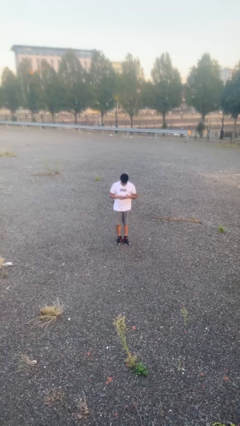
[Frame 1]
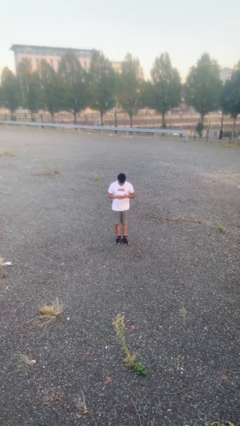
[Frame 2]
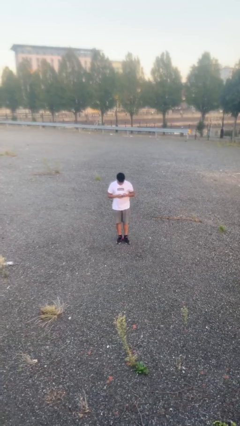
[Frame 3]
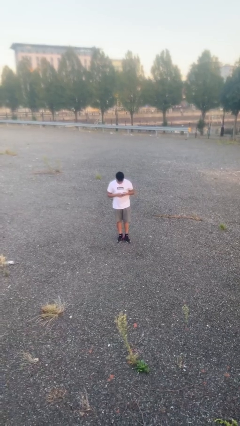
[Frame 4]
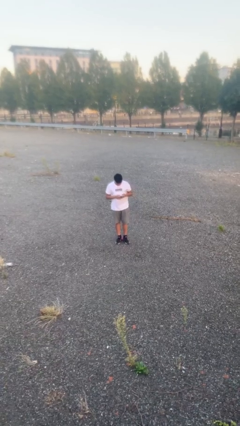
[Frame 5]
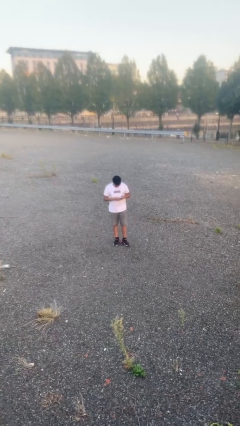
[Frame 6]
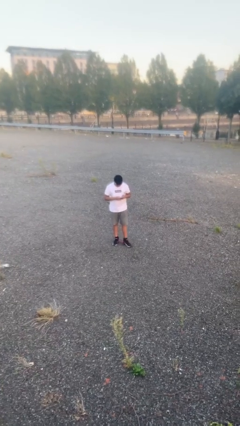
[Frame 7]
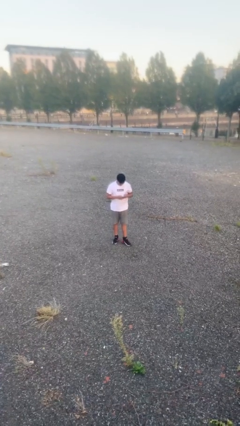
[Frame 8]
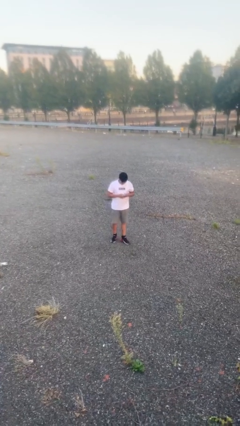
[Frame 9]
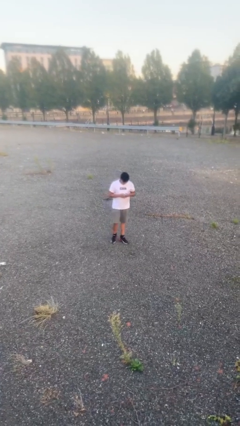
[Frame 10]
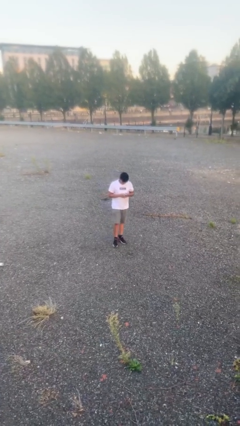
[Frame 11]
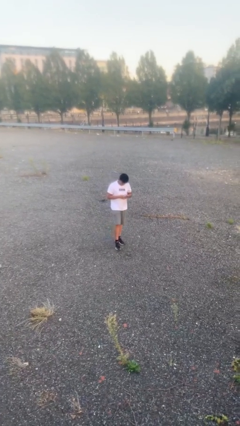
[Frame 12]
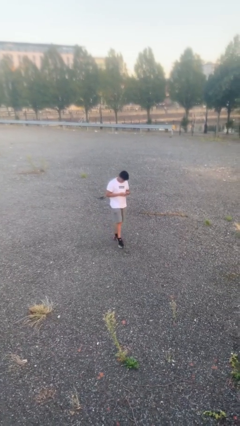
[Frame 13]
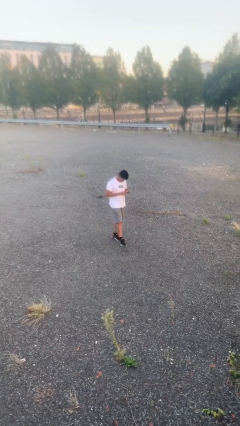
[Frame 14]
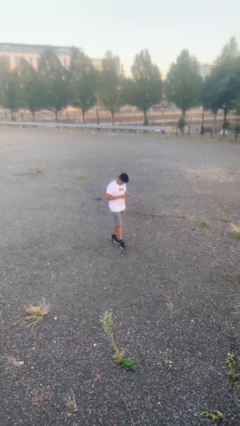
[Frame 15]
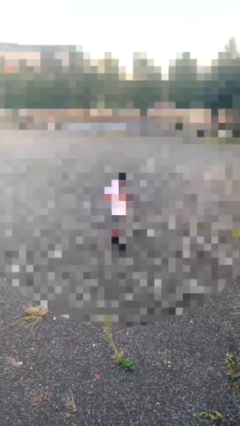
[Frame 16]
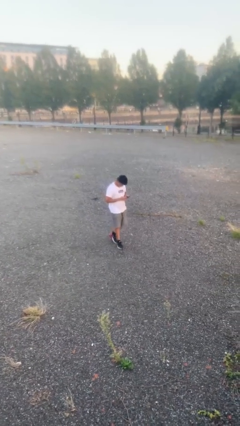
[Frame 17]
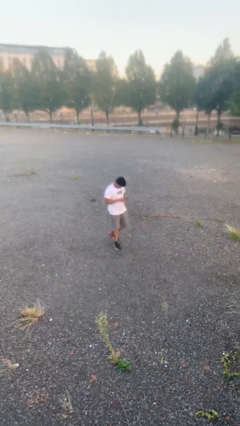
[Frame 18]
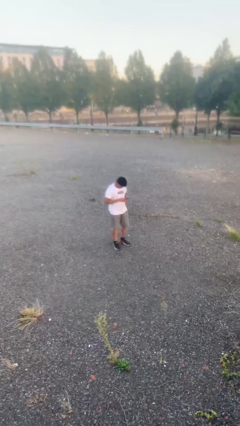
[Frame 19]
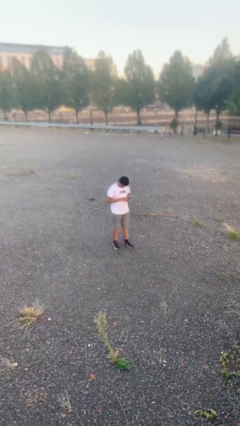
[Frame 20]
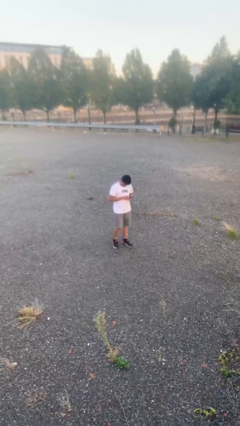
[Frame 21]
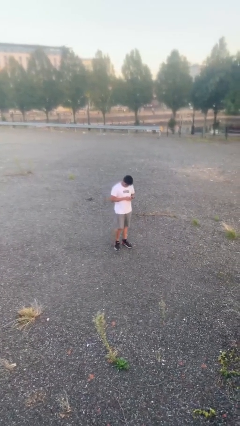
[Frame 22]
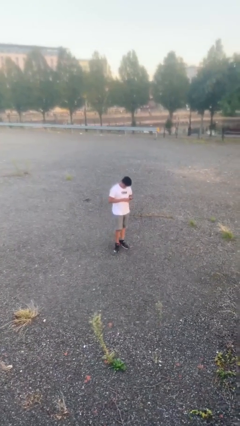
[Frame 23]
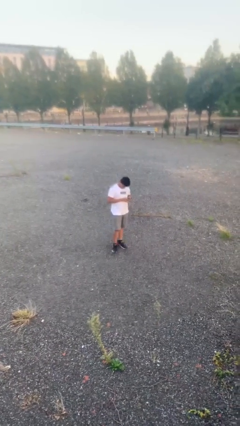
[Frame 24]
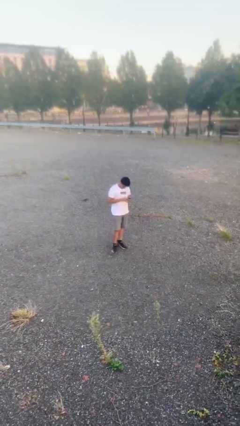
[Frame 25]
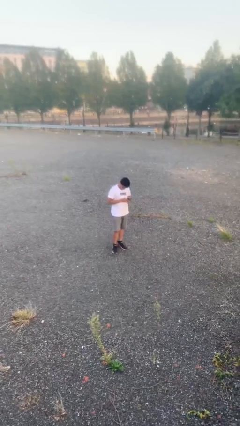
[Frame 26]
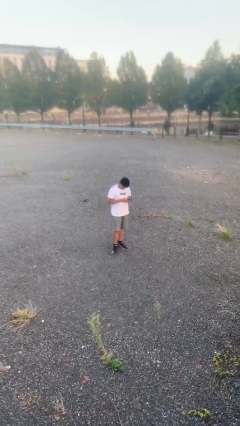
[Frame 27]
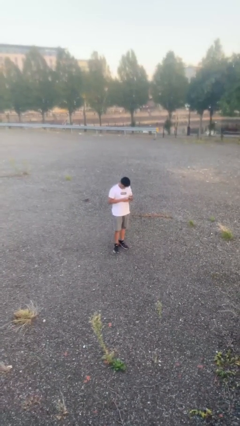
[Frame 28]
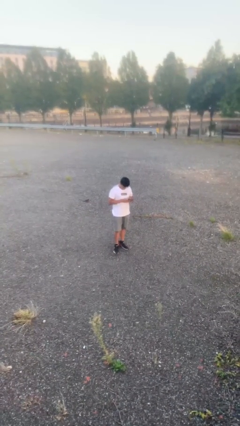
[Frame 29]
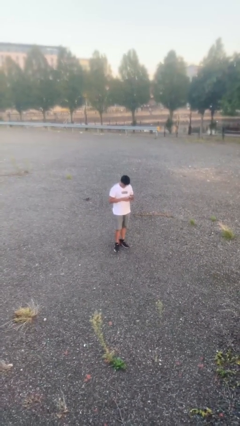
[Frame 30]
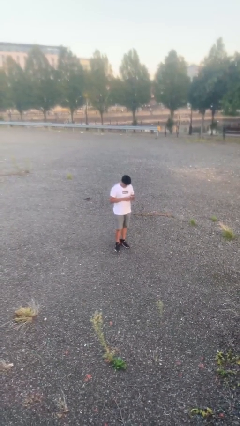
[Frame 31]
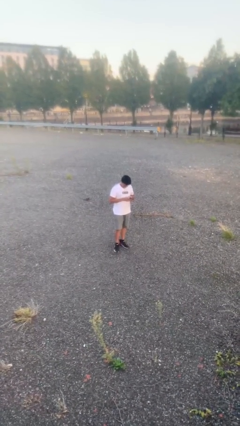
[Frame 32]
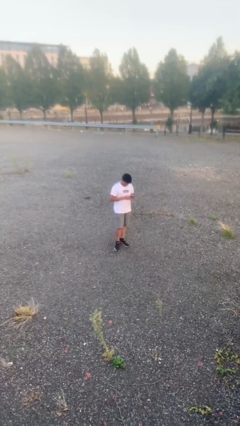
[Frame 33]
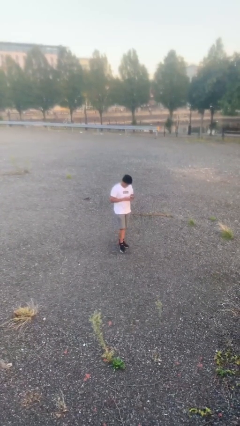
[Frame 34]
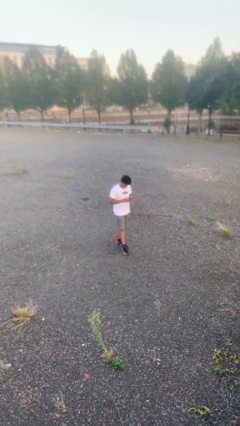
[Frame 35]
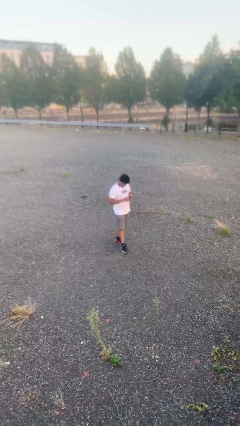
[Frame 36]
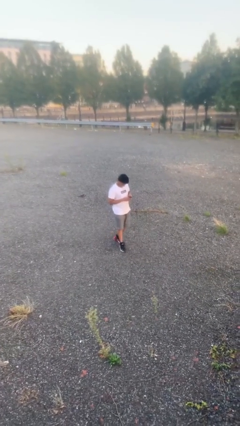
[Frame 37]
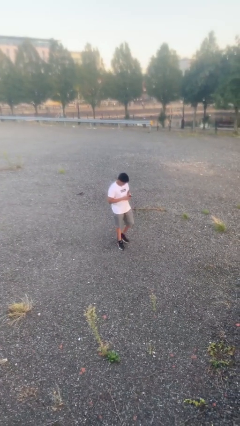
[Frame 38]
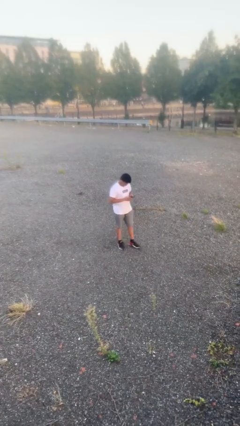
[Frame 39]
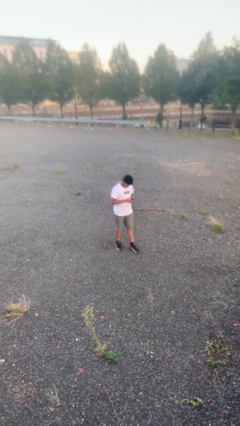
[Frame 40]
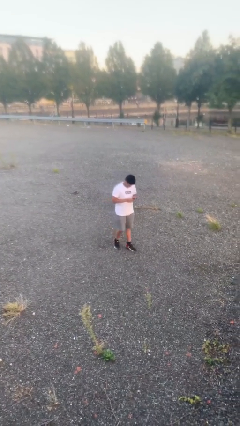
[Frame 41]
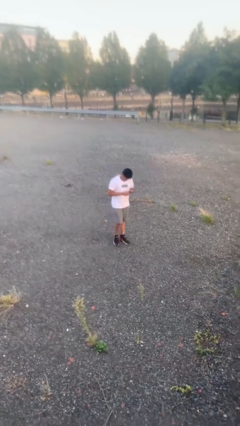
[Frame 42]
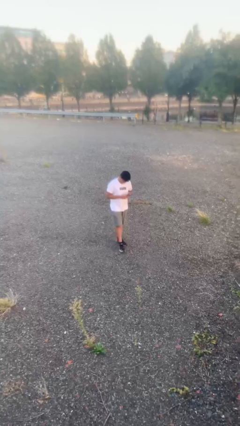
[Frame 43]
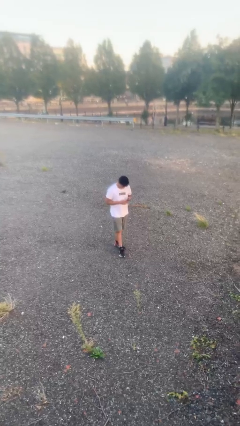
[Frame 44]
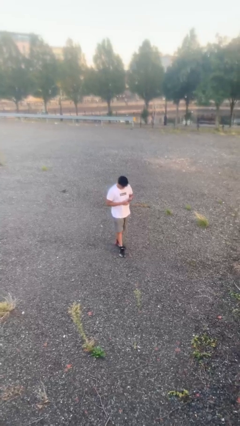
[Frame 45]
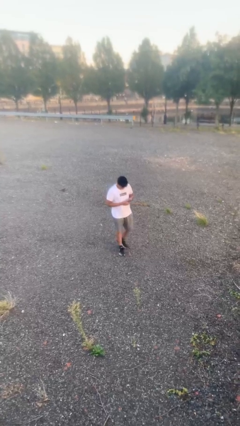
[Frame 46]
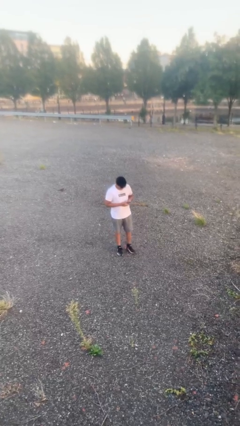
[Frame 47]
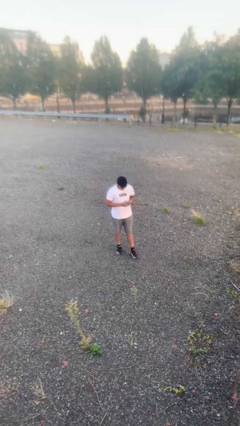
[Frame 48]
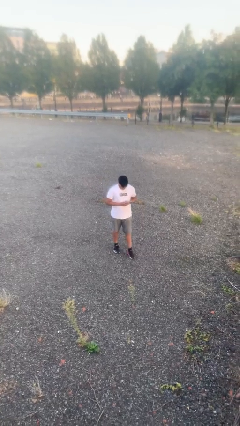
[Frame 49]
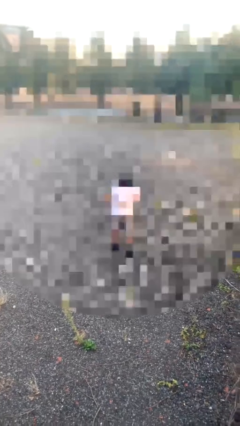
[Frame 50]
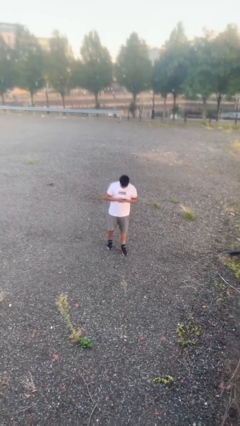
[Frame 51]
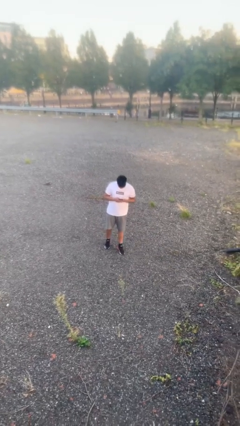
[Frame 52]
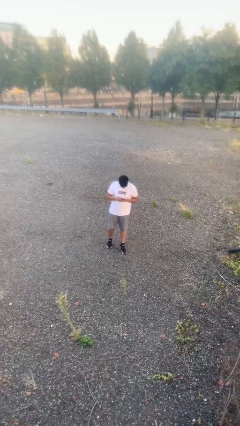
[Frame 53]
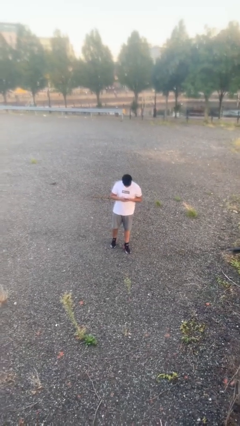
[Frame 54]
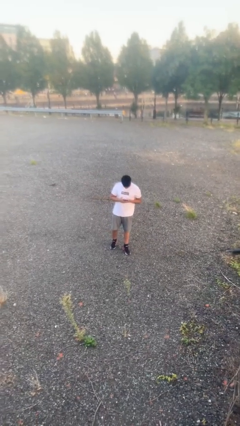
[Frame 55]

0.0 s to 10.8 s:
person texts on phone

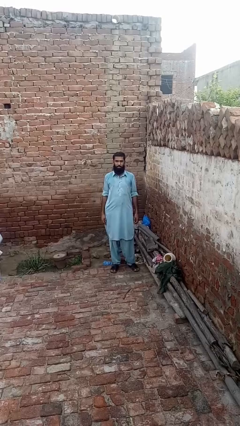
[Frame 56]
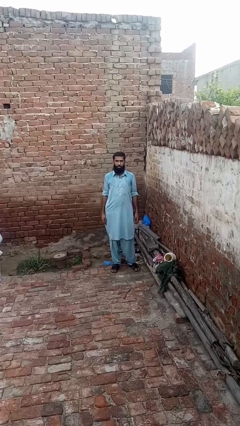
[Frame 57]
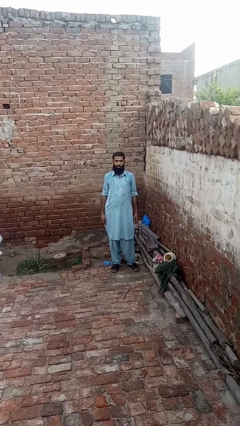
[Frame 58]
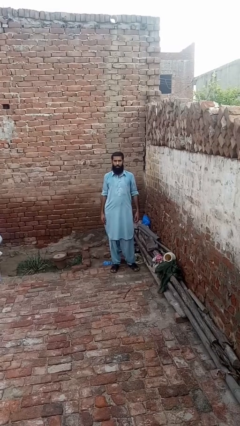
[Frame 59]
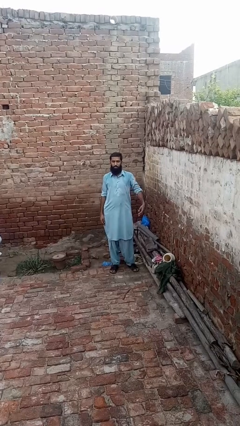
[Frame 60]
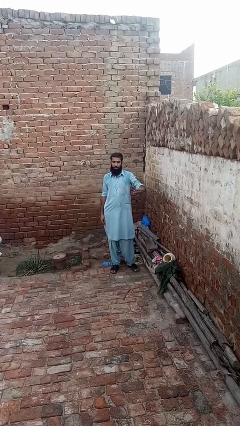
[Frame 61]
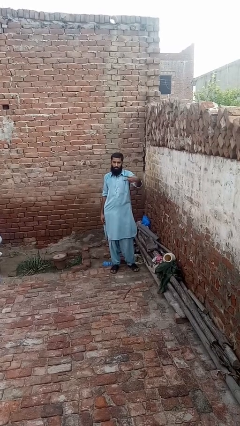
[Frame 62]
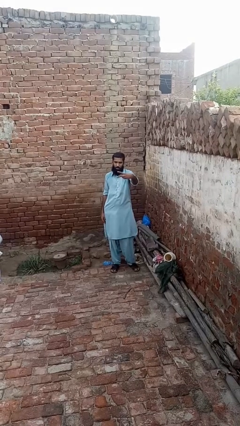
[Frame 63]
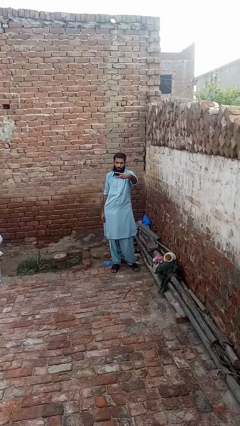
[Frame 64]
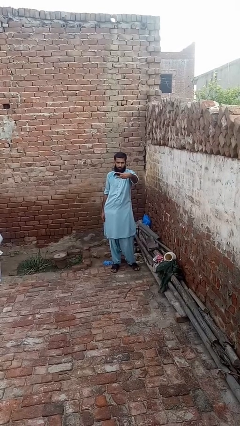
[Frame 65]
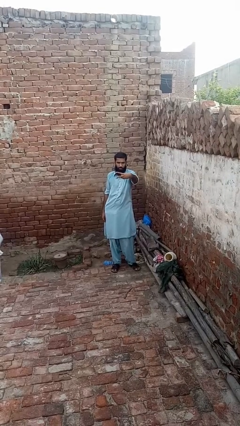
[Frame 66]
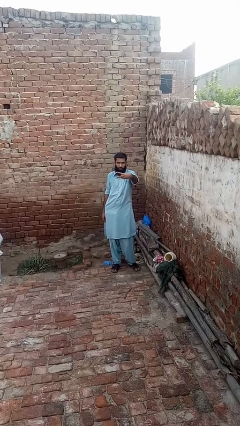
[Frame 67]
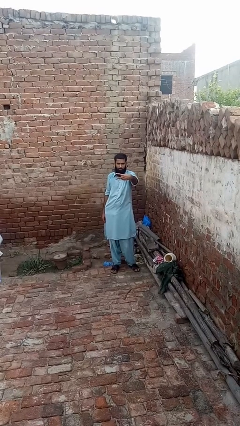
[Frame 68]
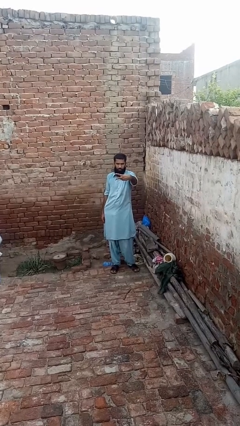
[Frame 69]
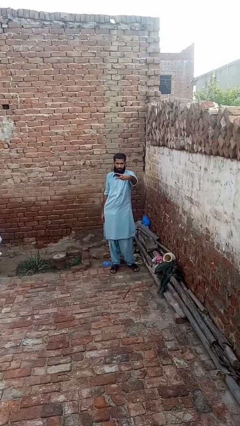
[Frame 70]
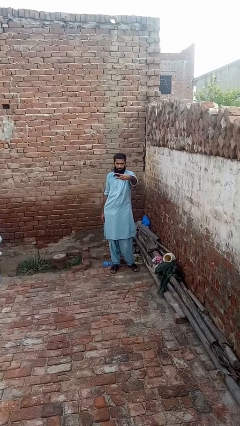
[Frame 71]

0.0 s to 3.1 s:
person gestures peace

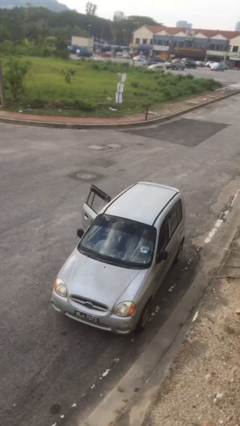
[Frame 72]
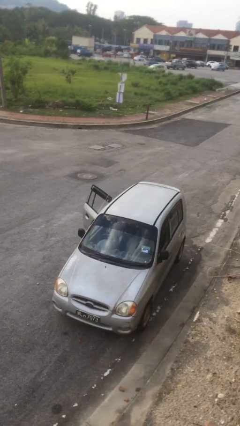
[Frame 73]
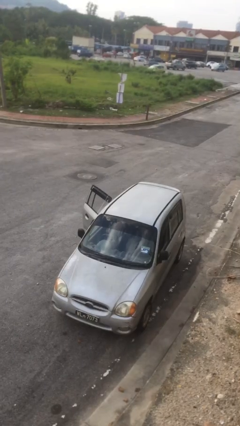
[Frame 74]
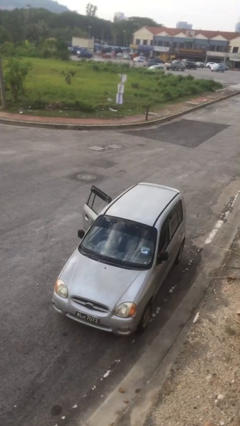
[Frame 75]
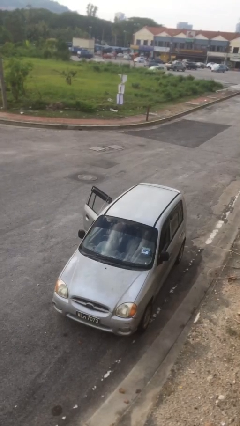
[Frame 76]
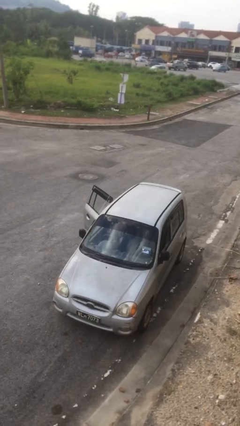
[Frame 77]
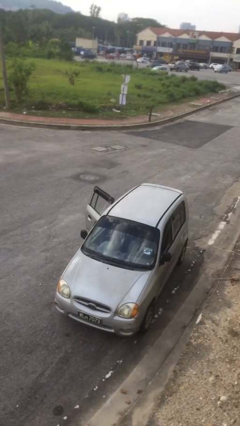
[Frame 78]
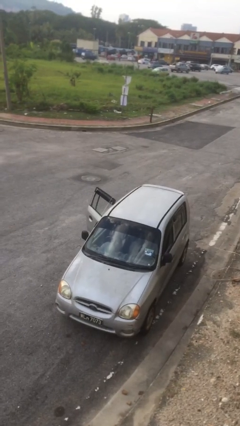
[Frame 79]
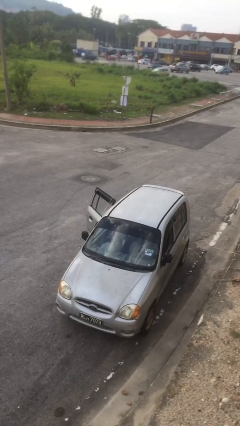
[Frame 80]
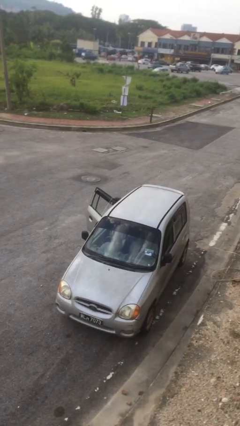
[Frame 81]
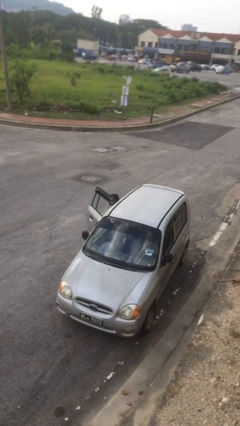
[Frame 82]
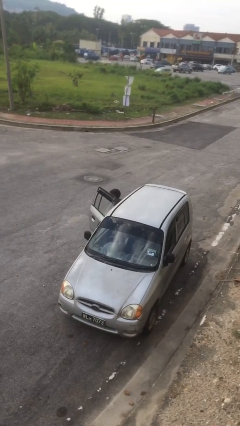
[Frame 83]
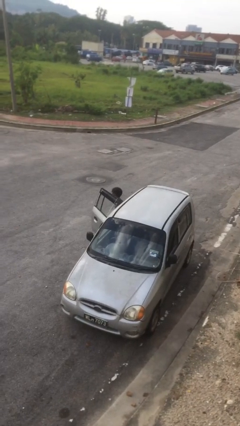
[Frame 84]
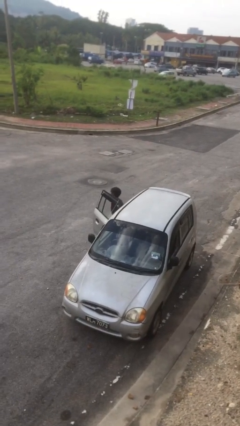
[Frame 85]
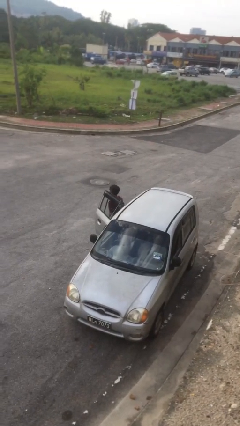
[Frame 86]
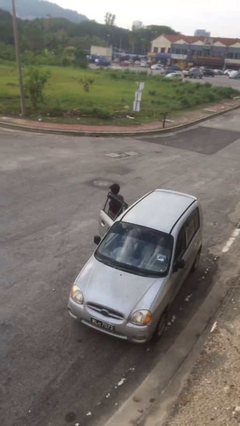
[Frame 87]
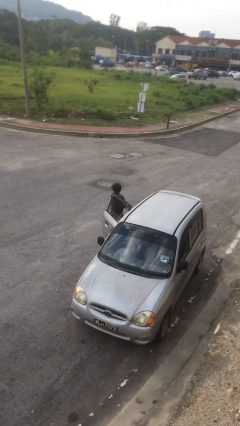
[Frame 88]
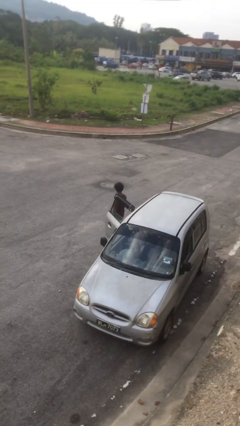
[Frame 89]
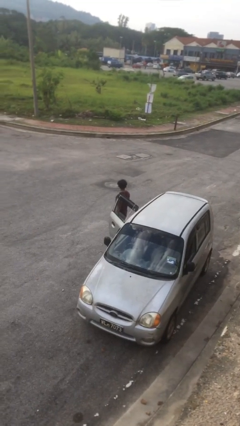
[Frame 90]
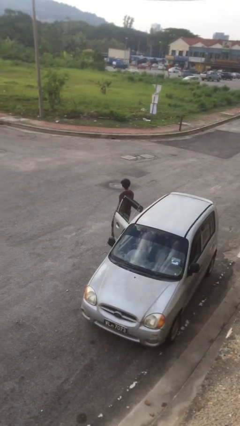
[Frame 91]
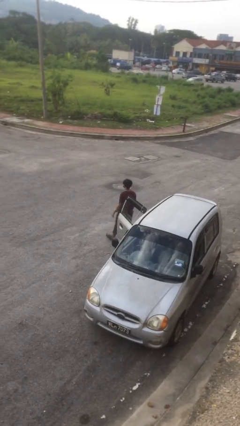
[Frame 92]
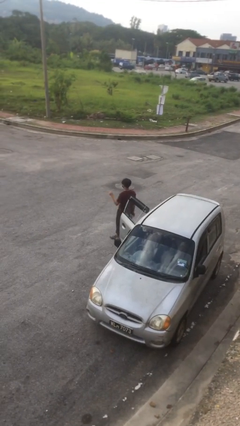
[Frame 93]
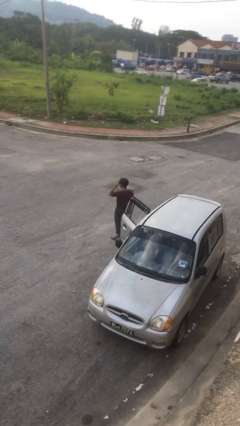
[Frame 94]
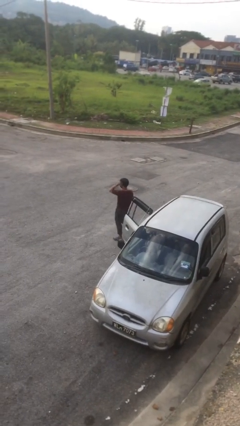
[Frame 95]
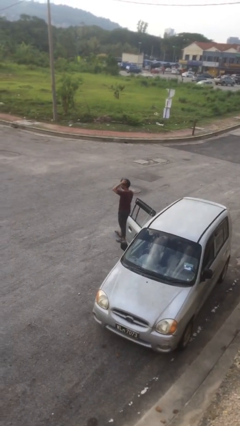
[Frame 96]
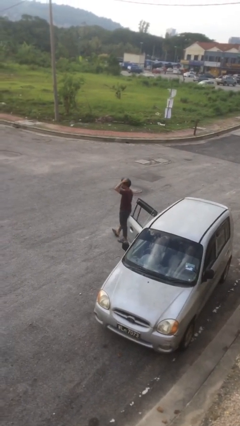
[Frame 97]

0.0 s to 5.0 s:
person exits car
